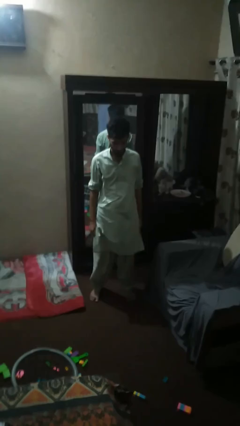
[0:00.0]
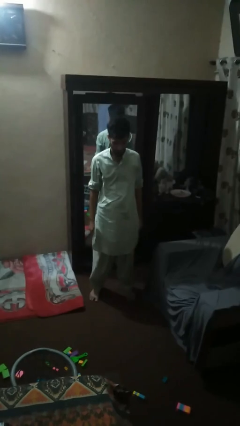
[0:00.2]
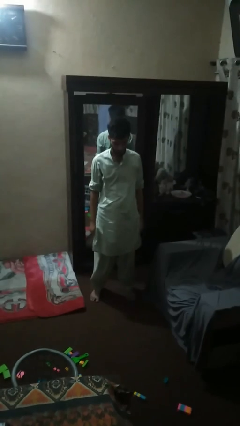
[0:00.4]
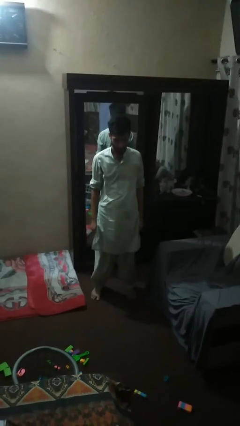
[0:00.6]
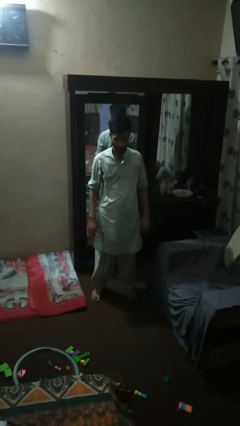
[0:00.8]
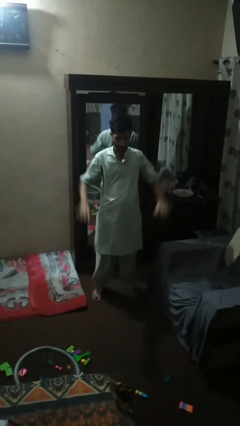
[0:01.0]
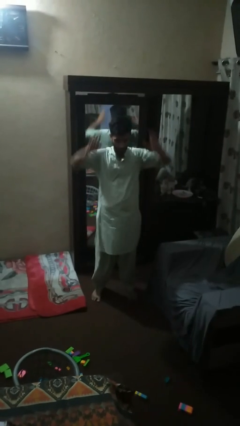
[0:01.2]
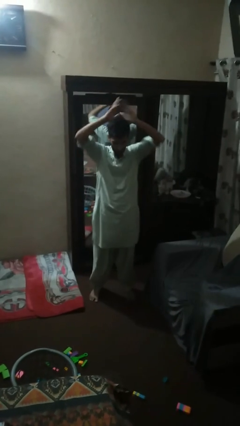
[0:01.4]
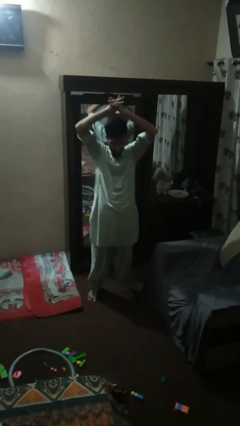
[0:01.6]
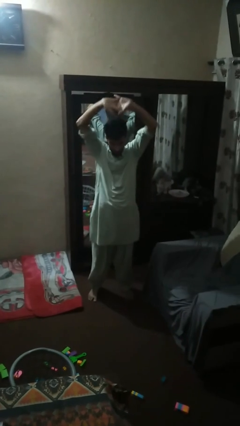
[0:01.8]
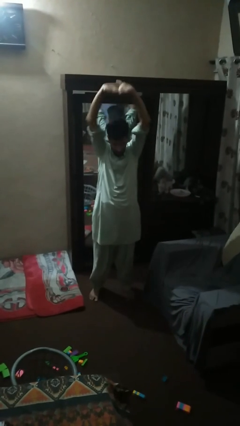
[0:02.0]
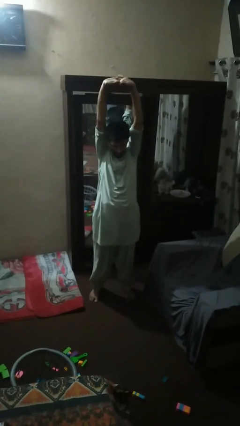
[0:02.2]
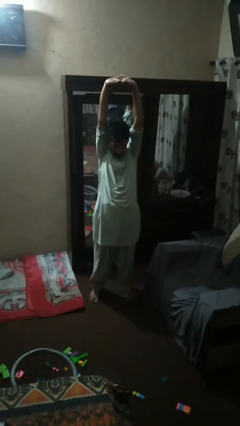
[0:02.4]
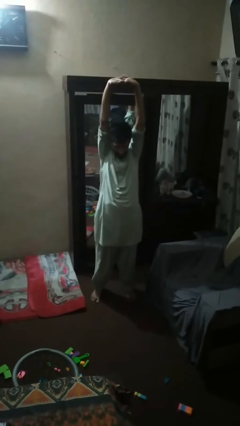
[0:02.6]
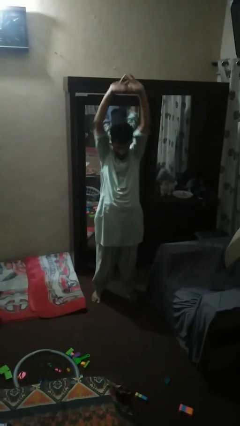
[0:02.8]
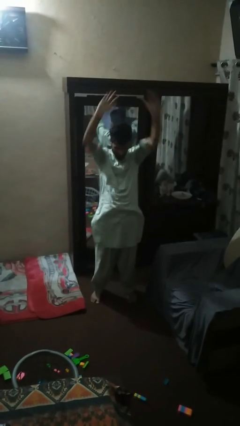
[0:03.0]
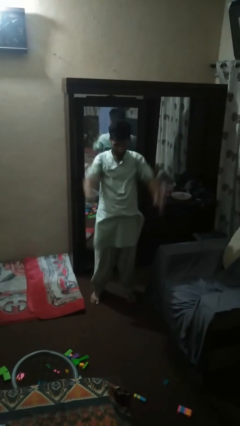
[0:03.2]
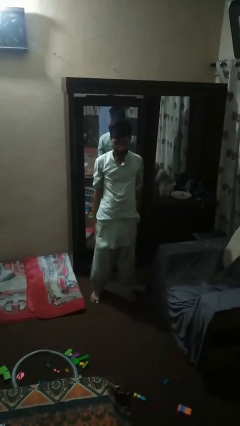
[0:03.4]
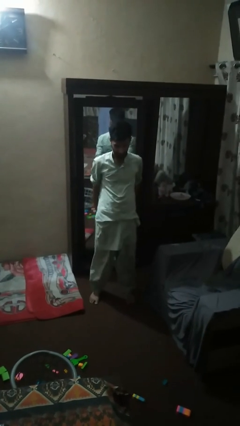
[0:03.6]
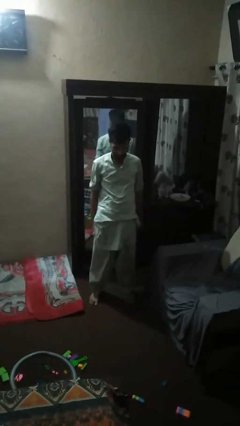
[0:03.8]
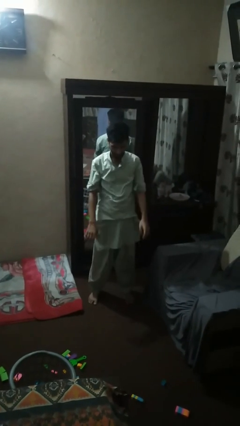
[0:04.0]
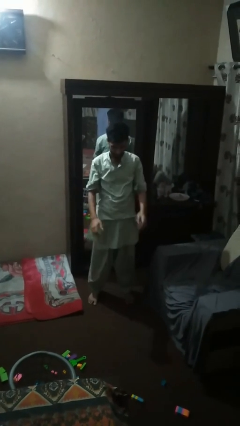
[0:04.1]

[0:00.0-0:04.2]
person stretches arms over head

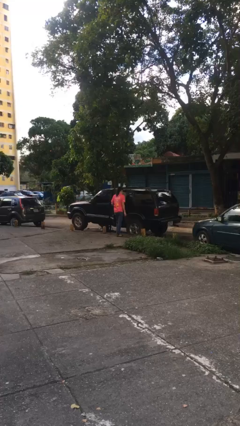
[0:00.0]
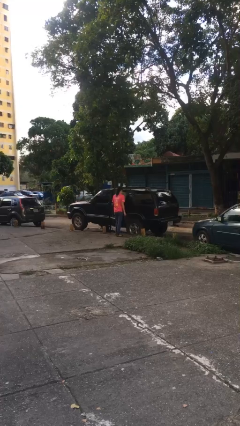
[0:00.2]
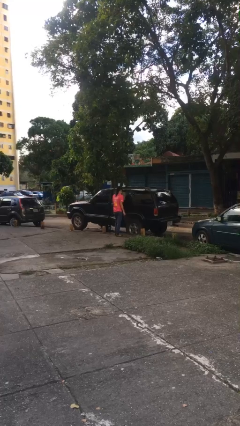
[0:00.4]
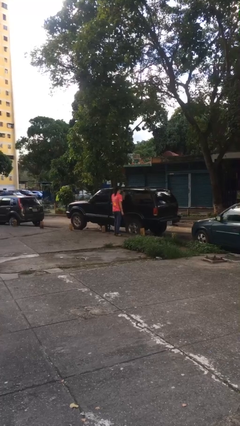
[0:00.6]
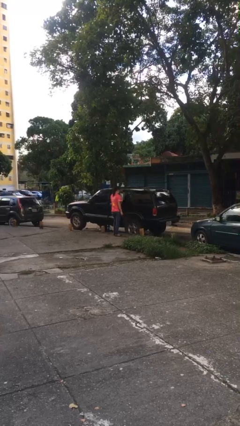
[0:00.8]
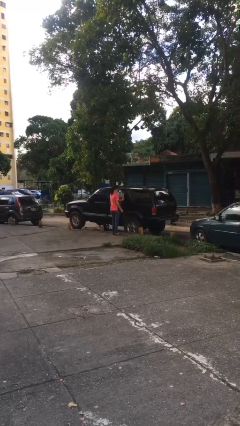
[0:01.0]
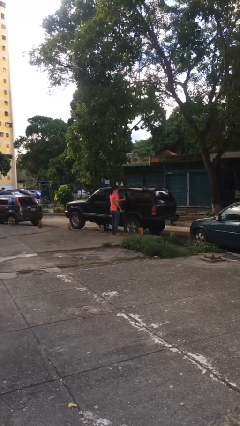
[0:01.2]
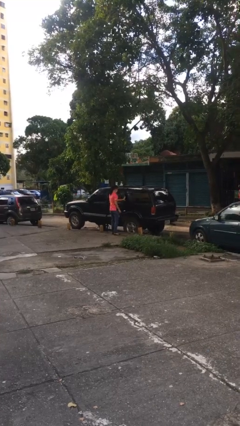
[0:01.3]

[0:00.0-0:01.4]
person closes car door

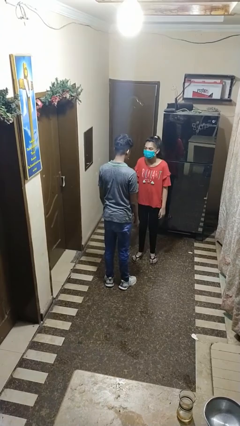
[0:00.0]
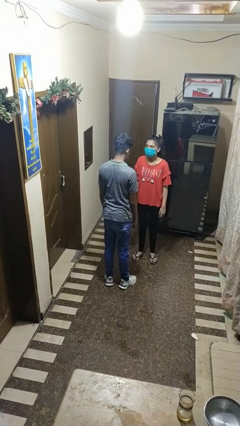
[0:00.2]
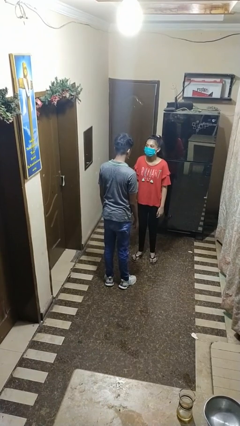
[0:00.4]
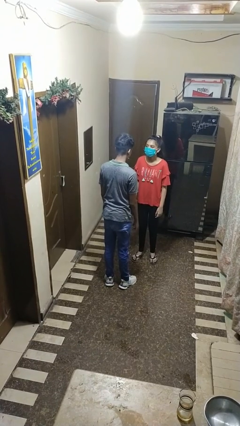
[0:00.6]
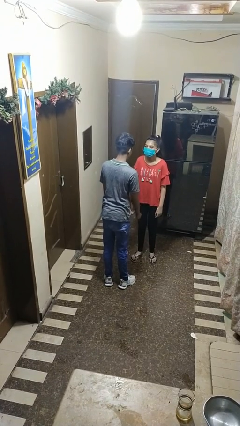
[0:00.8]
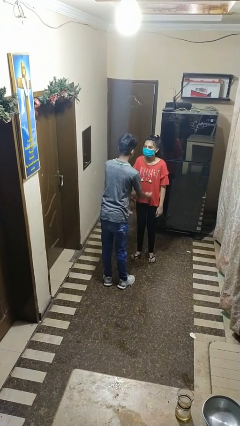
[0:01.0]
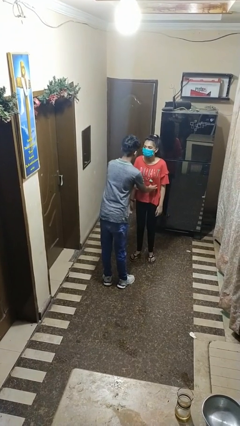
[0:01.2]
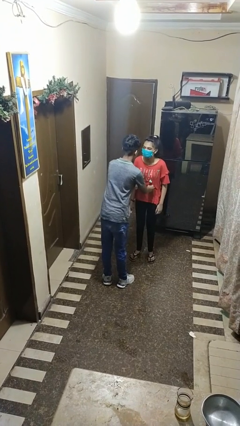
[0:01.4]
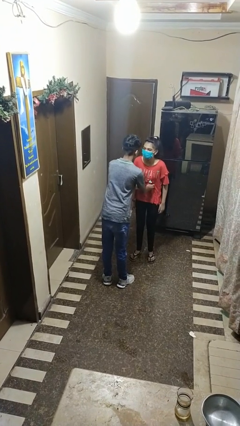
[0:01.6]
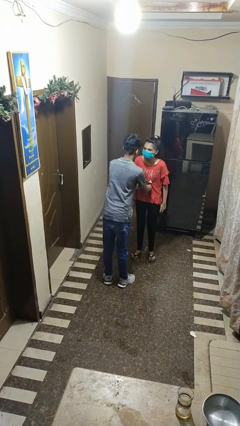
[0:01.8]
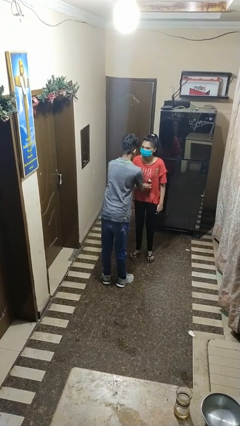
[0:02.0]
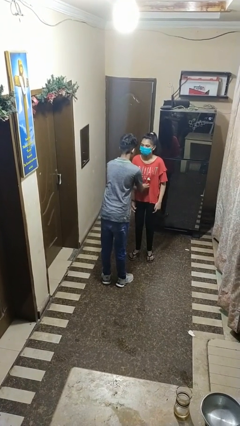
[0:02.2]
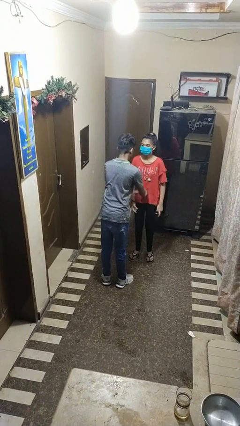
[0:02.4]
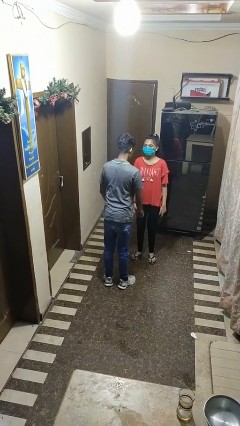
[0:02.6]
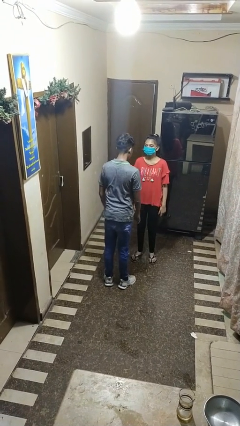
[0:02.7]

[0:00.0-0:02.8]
person tickles person

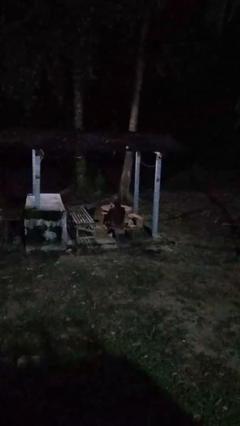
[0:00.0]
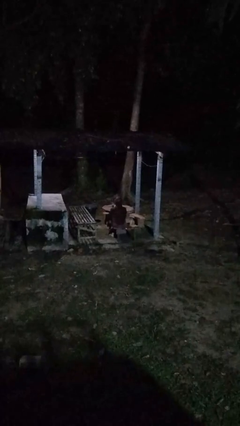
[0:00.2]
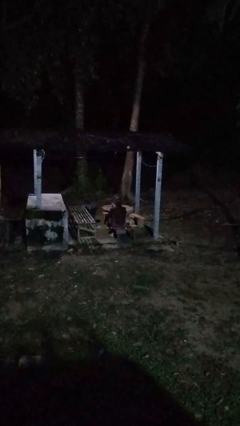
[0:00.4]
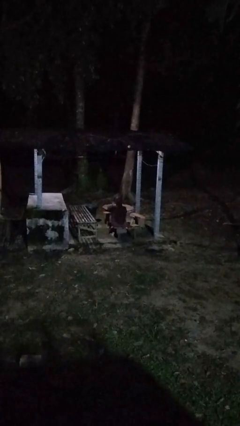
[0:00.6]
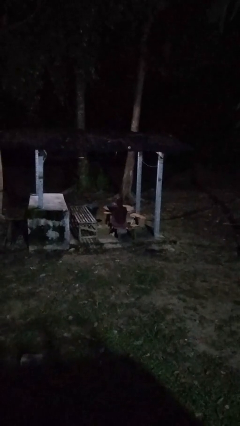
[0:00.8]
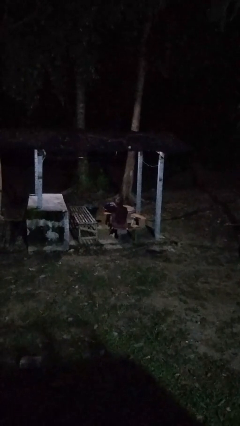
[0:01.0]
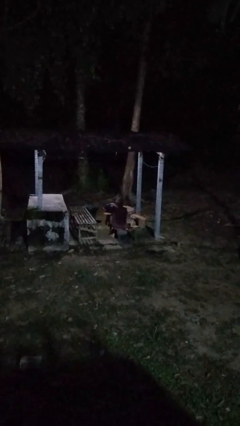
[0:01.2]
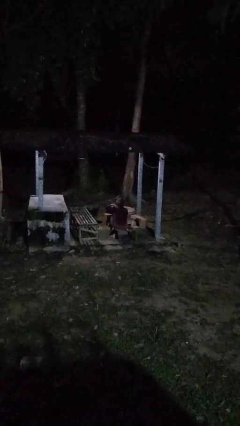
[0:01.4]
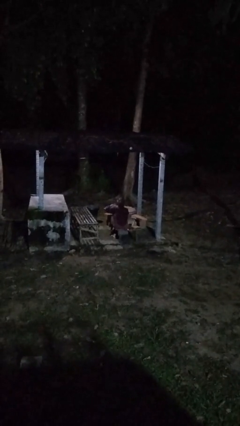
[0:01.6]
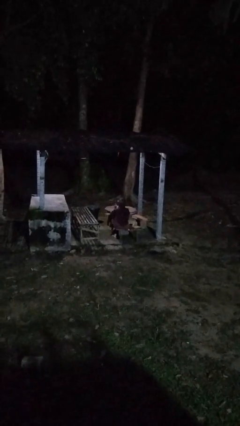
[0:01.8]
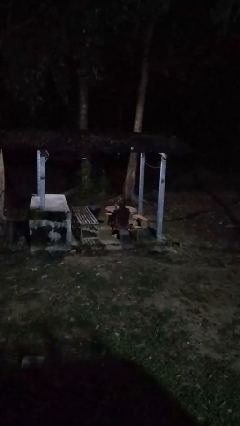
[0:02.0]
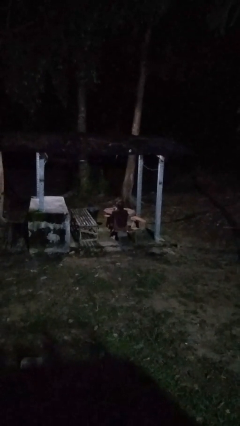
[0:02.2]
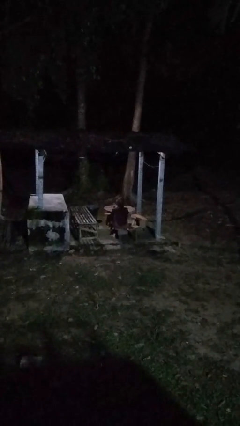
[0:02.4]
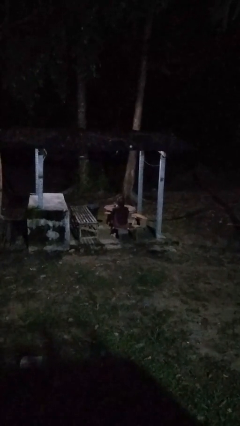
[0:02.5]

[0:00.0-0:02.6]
person gestures cut

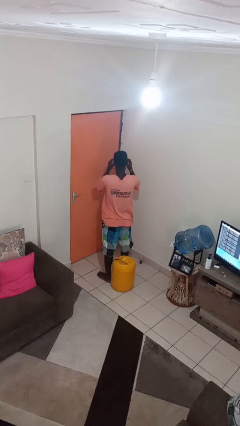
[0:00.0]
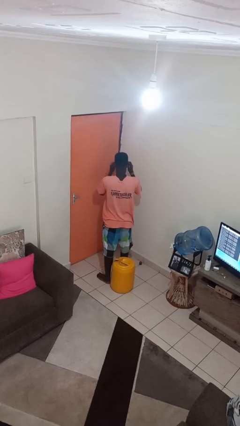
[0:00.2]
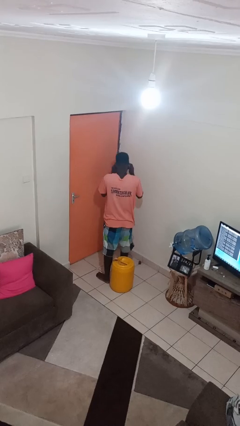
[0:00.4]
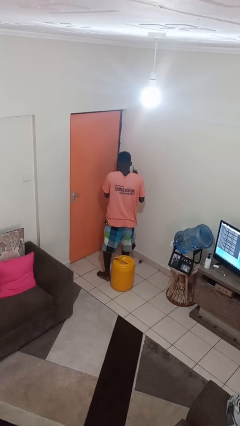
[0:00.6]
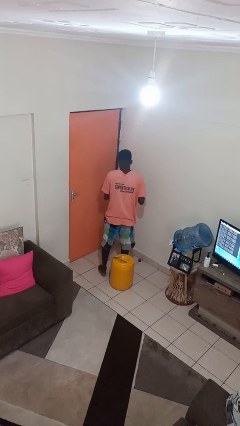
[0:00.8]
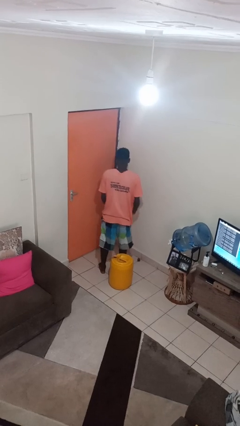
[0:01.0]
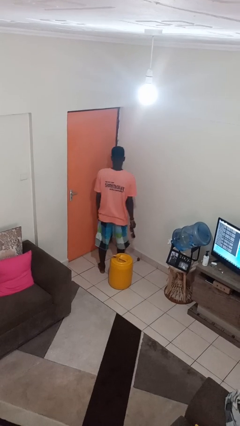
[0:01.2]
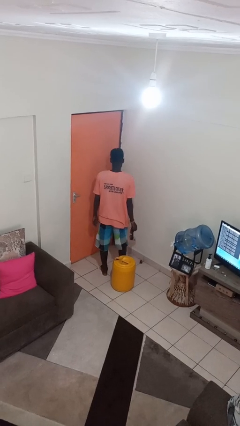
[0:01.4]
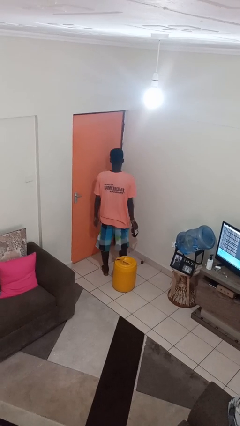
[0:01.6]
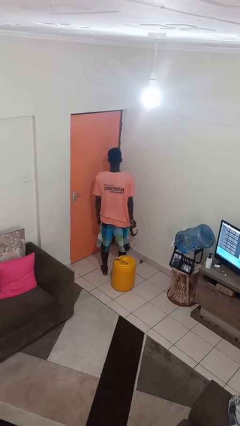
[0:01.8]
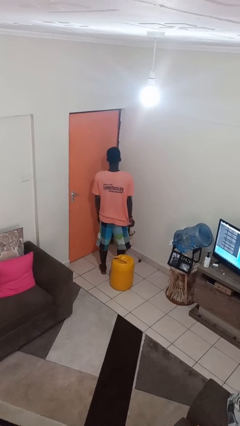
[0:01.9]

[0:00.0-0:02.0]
person takes off sunglasses

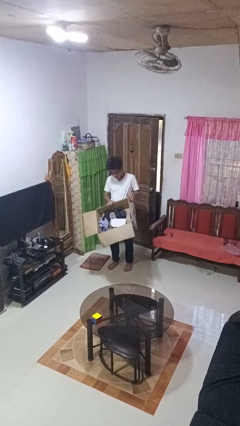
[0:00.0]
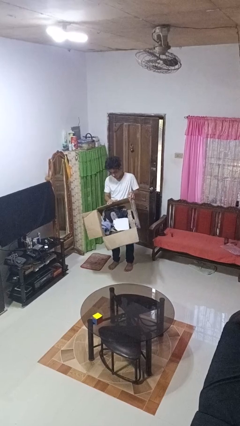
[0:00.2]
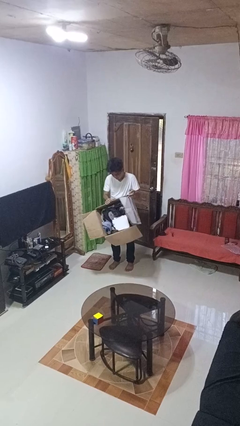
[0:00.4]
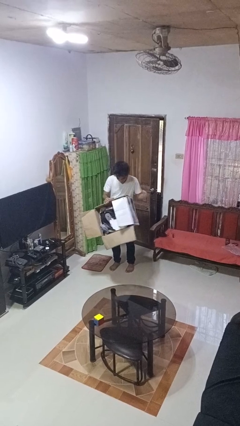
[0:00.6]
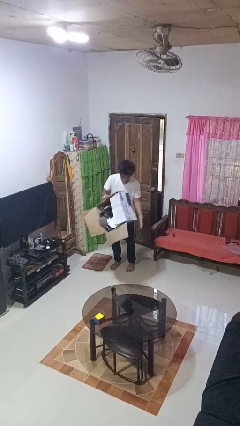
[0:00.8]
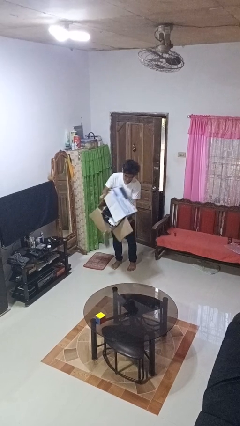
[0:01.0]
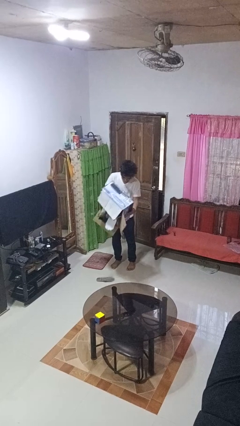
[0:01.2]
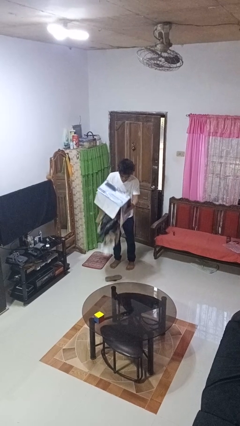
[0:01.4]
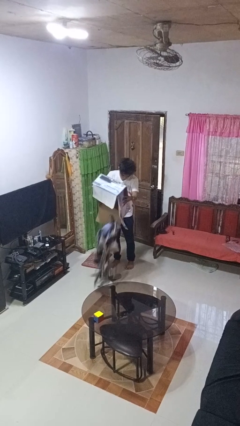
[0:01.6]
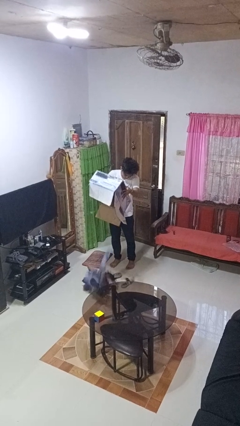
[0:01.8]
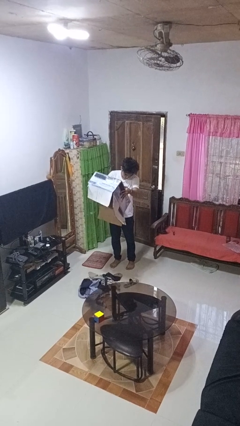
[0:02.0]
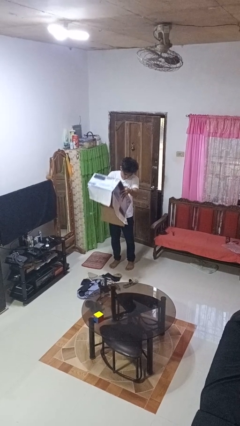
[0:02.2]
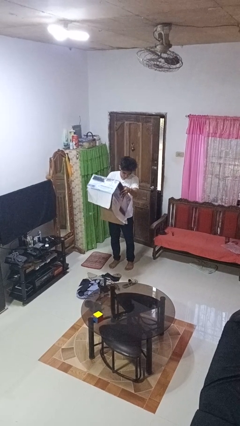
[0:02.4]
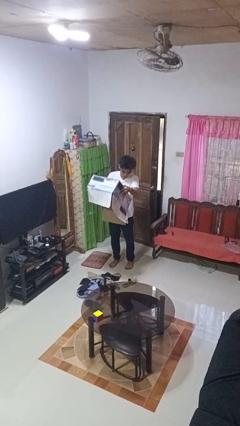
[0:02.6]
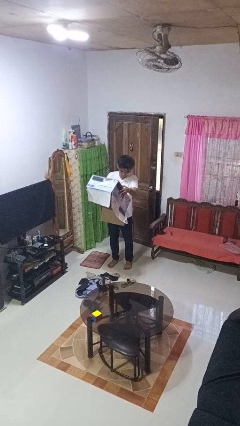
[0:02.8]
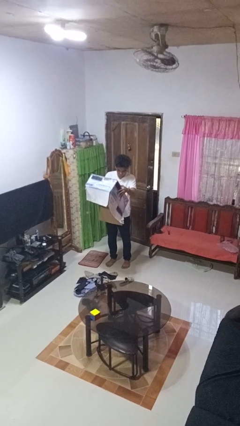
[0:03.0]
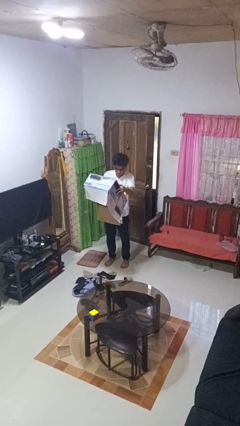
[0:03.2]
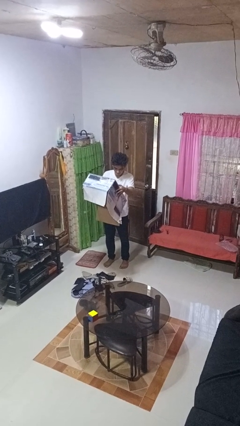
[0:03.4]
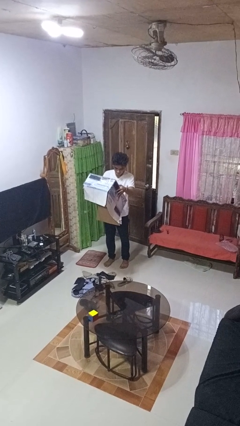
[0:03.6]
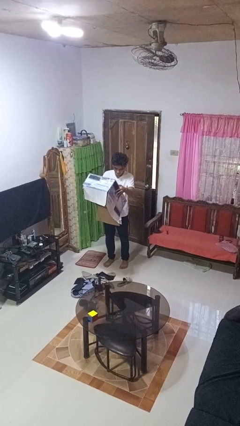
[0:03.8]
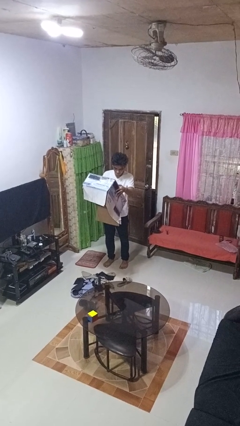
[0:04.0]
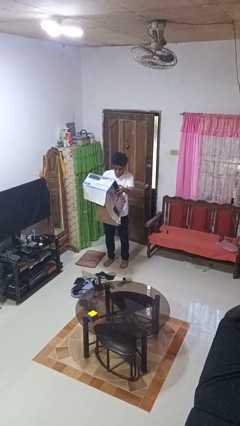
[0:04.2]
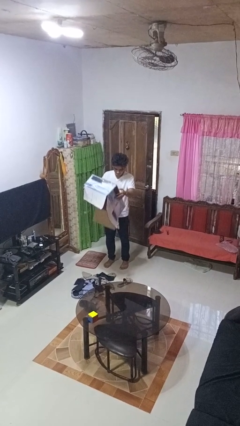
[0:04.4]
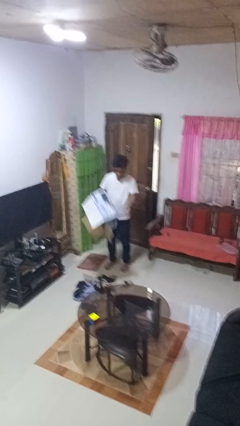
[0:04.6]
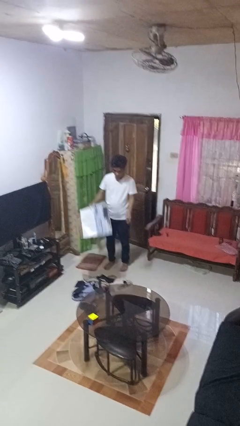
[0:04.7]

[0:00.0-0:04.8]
person unloads box onto floor
